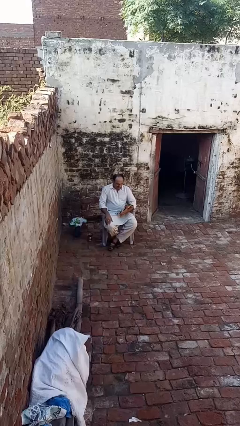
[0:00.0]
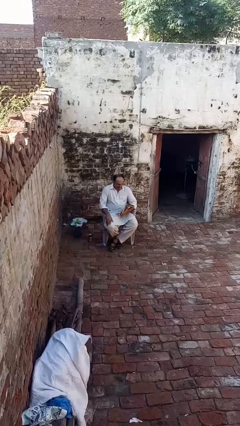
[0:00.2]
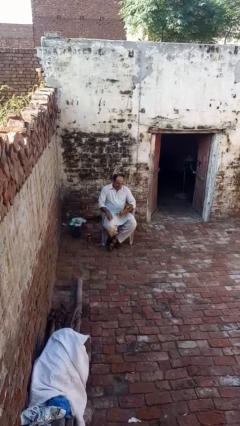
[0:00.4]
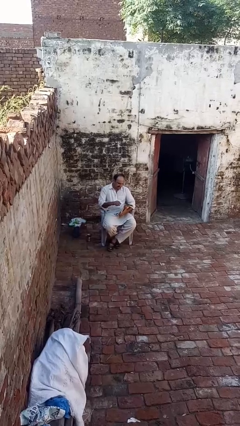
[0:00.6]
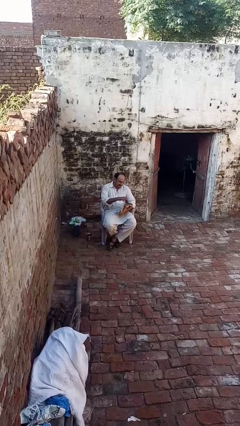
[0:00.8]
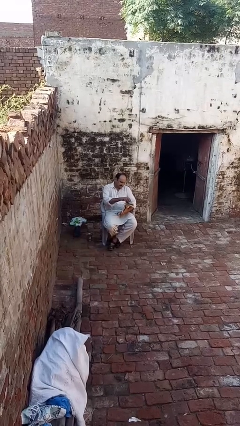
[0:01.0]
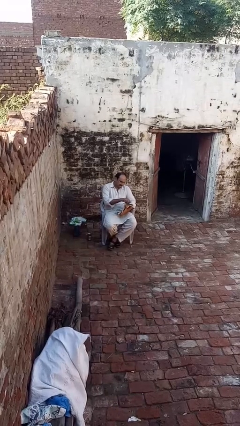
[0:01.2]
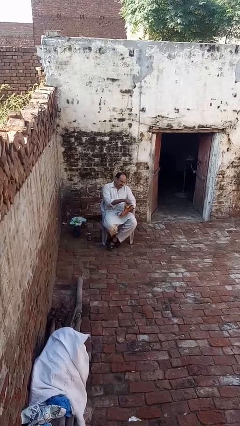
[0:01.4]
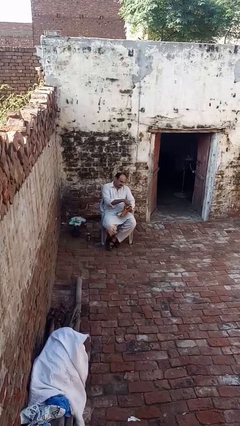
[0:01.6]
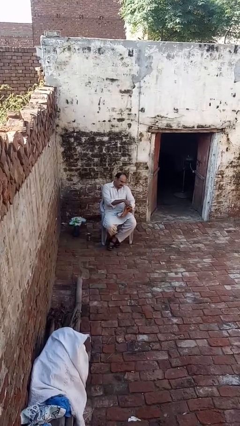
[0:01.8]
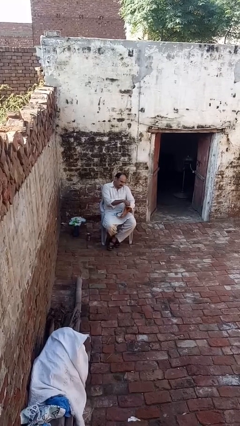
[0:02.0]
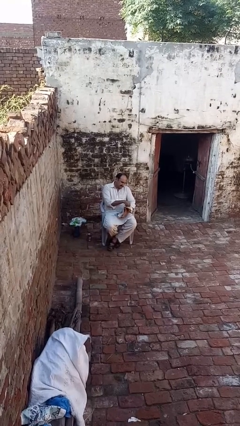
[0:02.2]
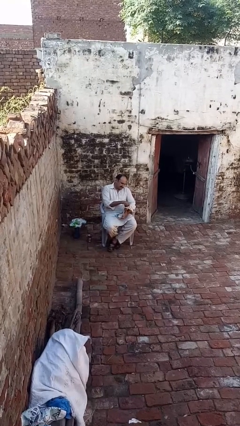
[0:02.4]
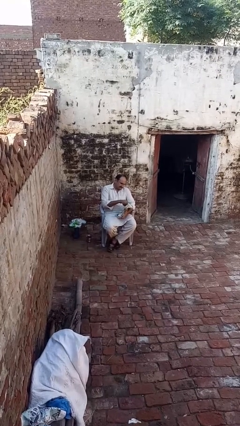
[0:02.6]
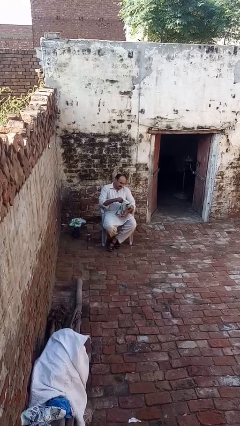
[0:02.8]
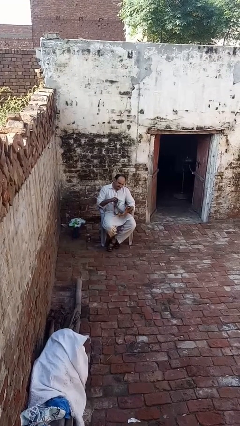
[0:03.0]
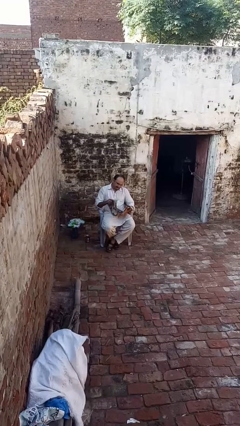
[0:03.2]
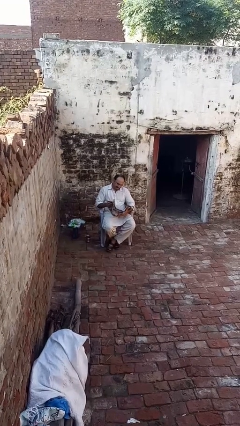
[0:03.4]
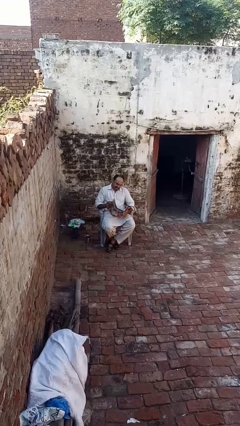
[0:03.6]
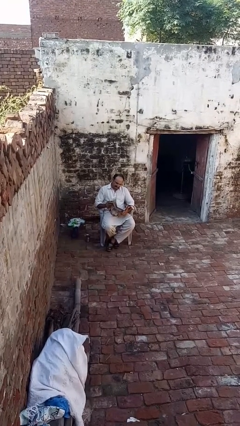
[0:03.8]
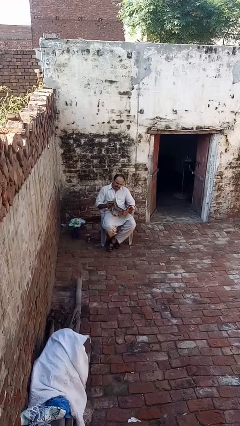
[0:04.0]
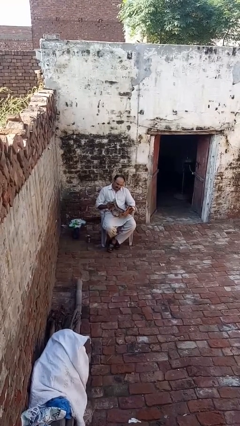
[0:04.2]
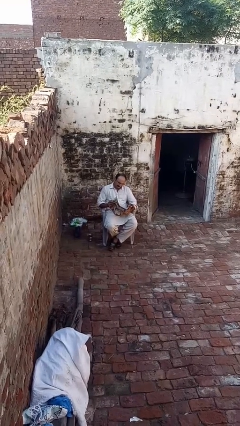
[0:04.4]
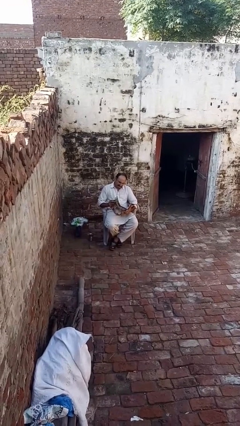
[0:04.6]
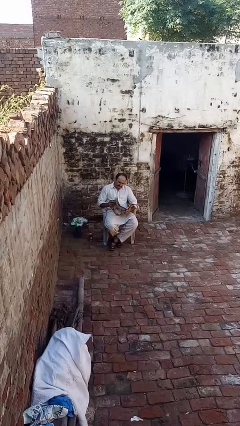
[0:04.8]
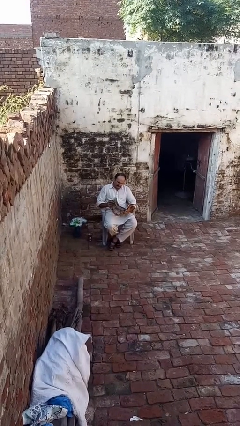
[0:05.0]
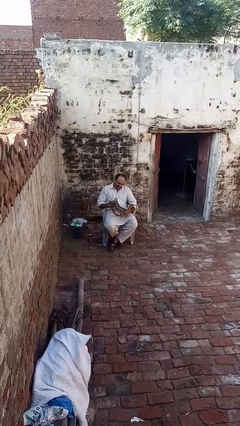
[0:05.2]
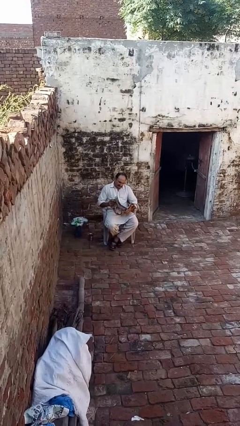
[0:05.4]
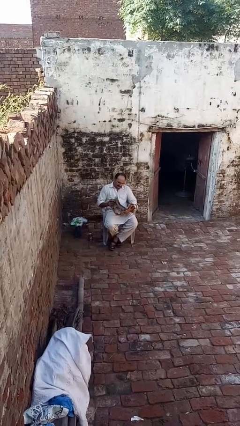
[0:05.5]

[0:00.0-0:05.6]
person reads magazine

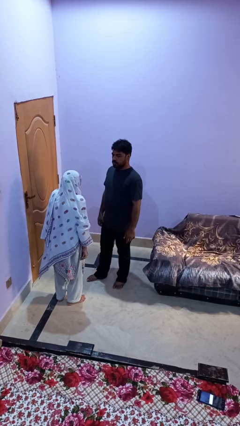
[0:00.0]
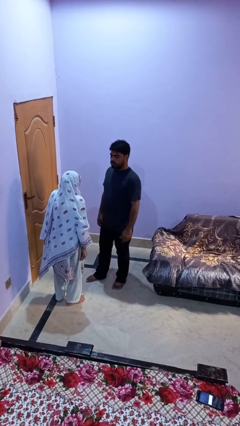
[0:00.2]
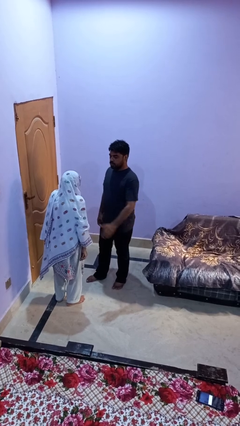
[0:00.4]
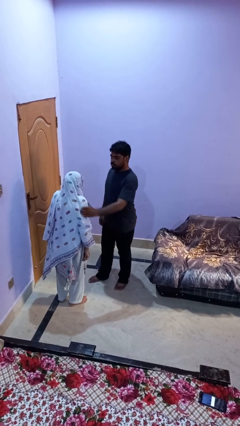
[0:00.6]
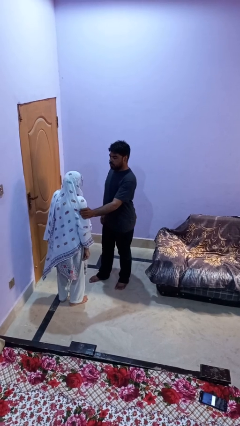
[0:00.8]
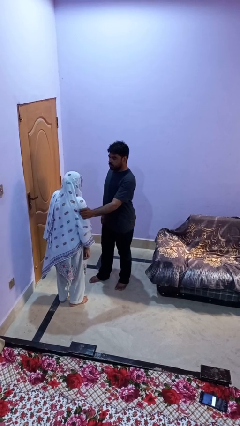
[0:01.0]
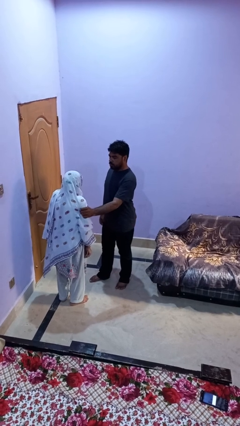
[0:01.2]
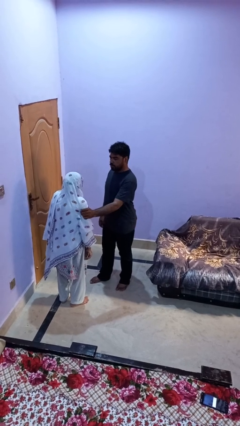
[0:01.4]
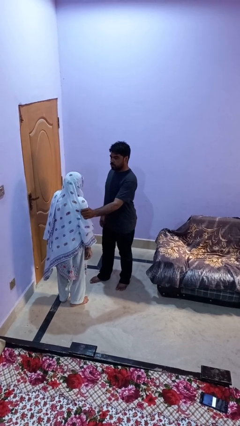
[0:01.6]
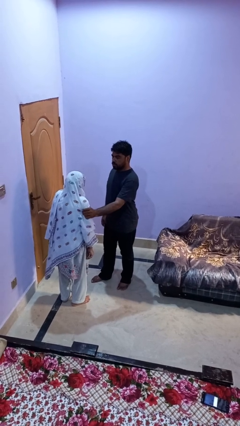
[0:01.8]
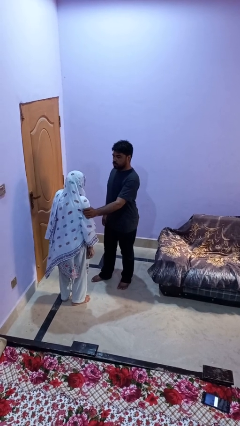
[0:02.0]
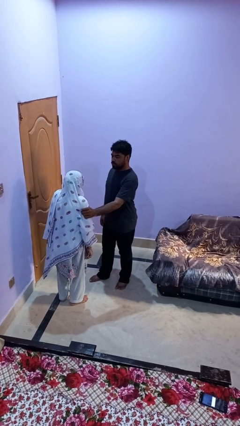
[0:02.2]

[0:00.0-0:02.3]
person grabs person by bicep

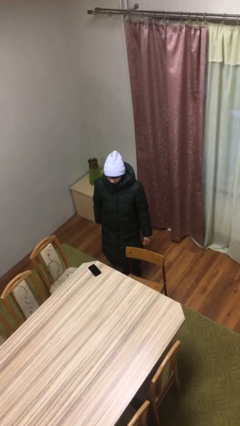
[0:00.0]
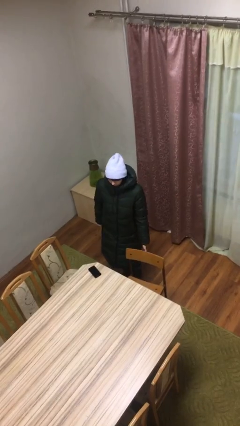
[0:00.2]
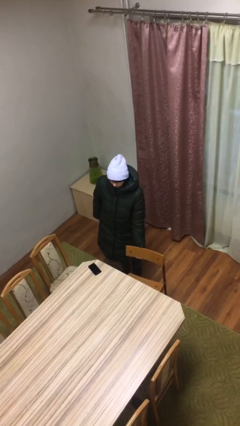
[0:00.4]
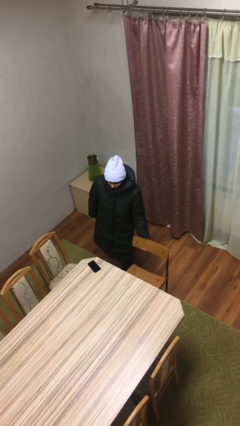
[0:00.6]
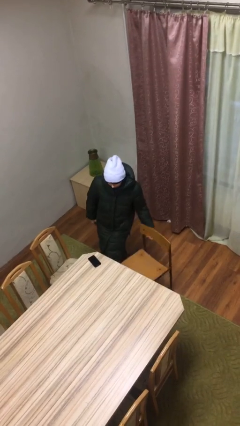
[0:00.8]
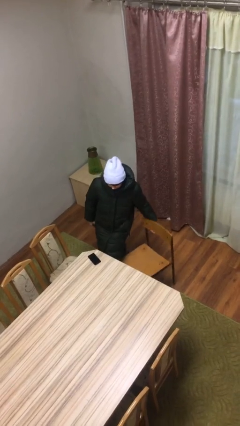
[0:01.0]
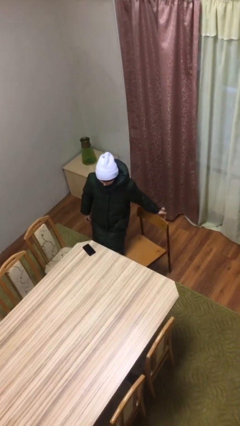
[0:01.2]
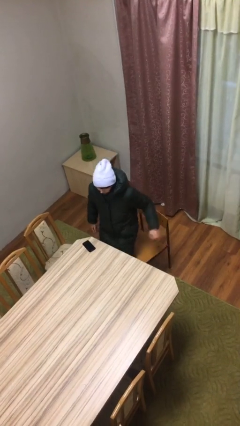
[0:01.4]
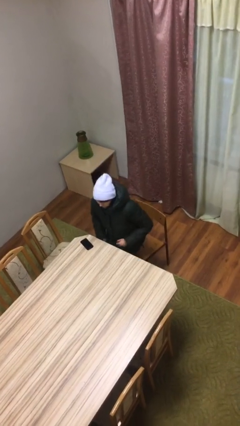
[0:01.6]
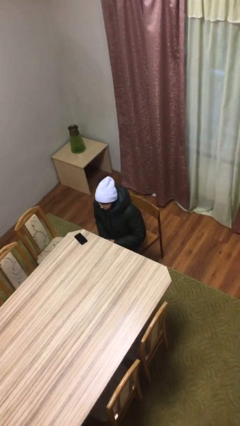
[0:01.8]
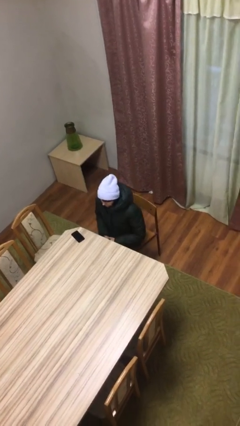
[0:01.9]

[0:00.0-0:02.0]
person sits down

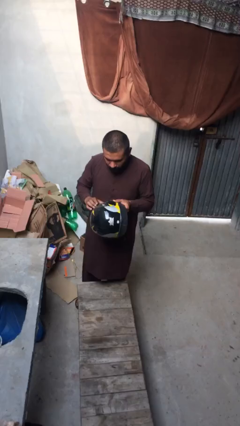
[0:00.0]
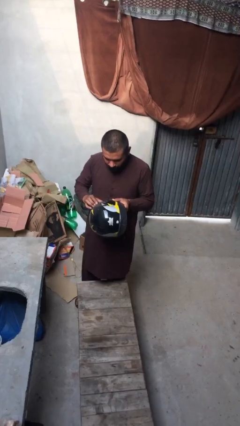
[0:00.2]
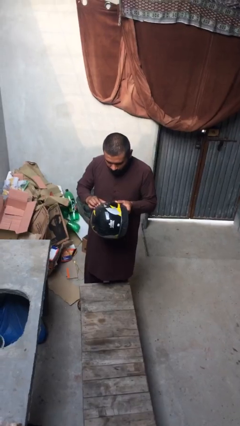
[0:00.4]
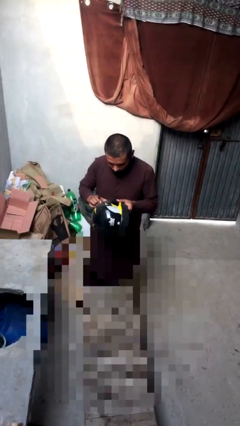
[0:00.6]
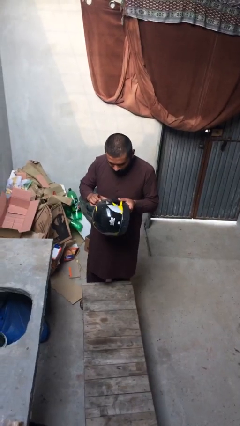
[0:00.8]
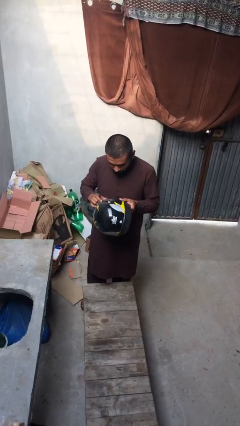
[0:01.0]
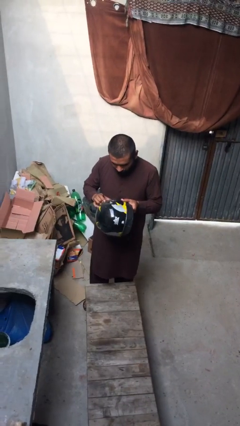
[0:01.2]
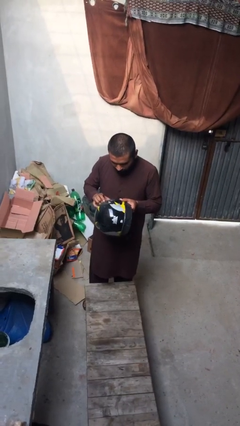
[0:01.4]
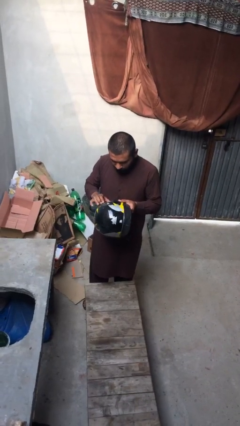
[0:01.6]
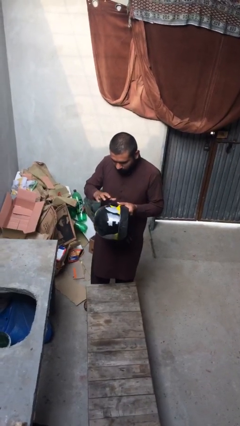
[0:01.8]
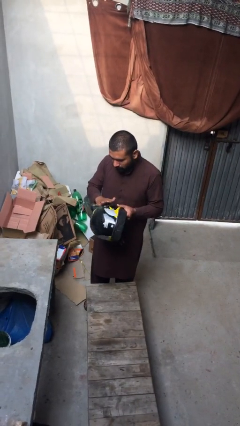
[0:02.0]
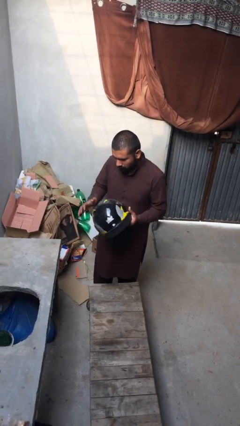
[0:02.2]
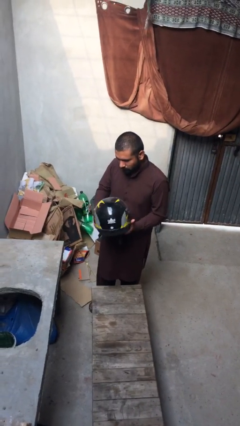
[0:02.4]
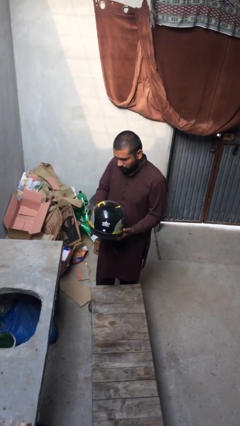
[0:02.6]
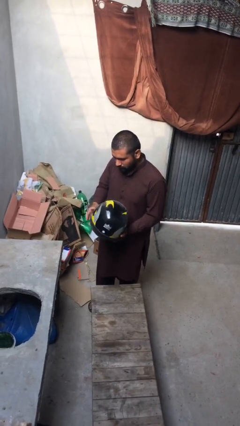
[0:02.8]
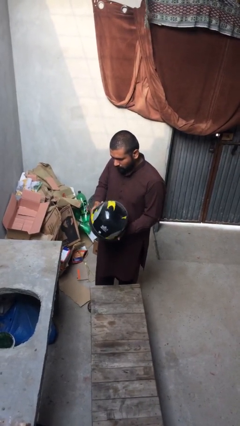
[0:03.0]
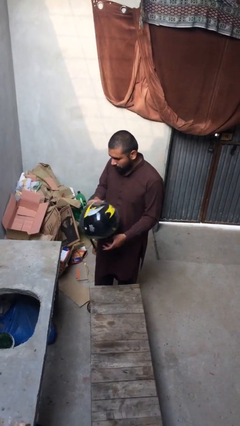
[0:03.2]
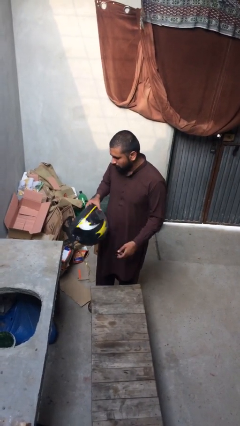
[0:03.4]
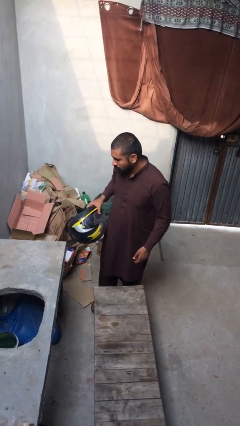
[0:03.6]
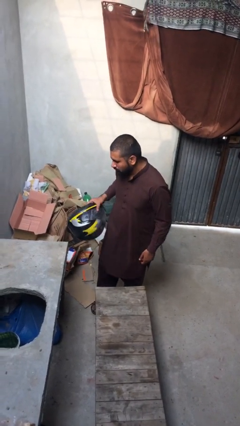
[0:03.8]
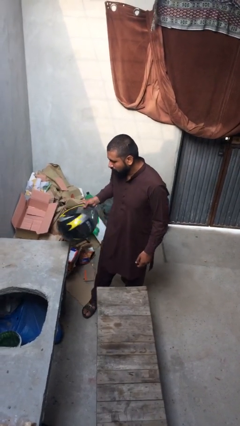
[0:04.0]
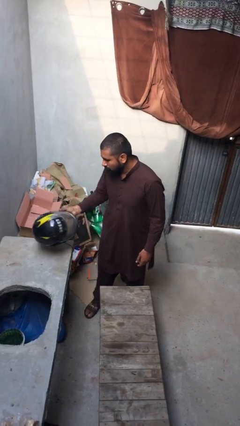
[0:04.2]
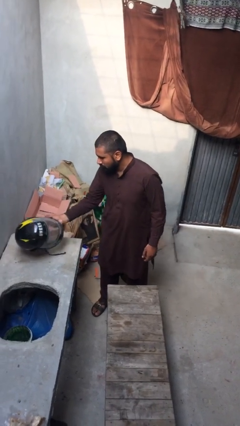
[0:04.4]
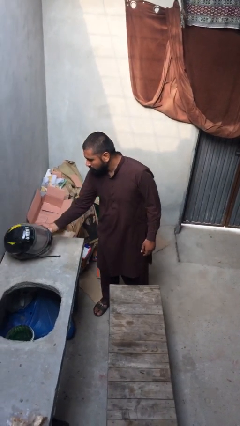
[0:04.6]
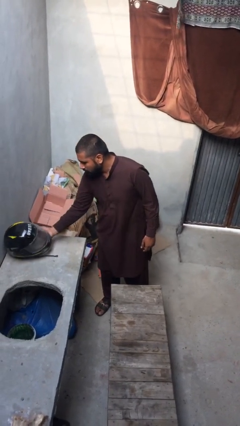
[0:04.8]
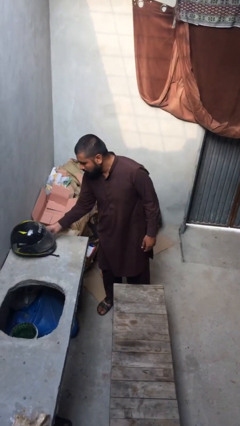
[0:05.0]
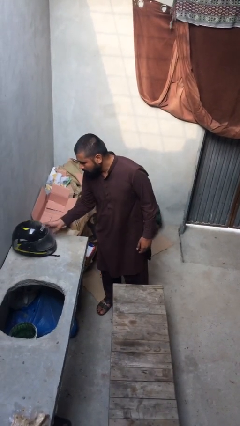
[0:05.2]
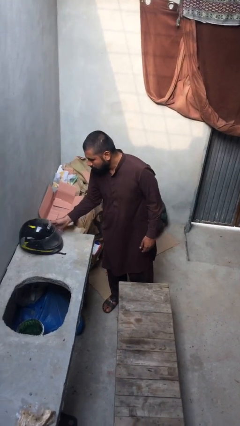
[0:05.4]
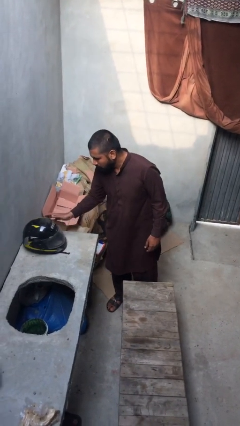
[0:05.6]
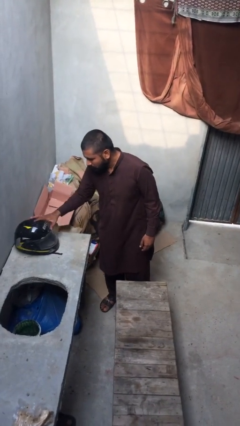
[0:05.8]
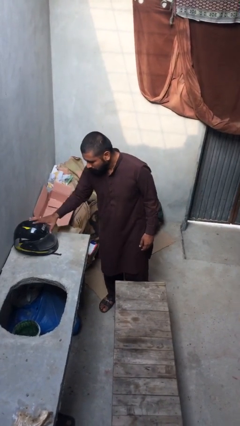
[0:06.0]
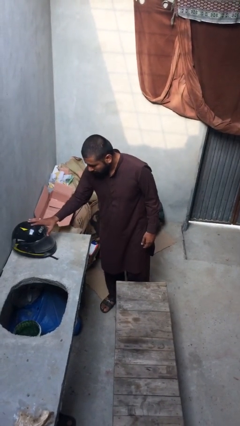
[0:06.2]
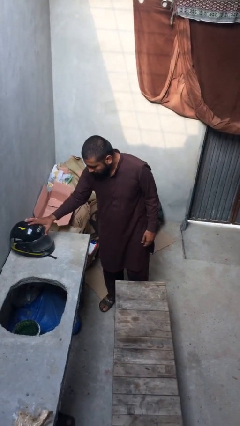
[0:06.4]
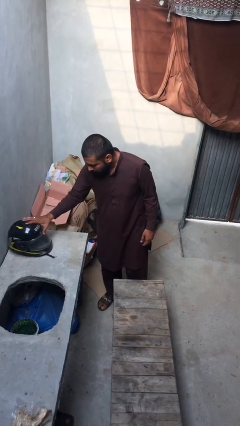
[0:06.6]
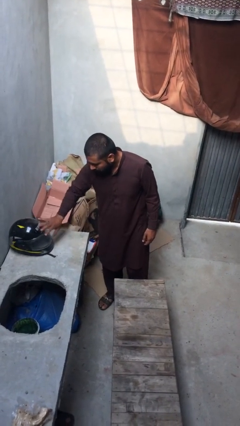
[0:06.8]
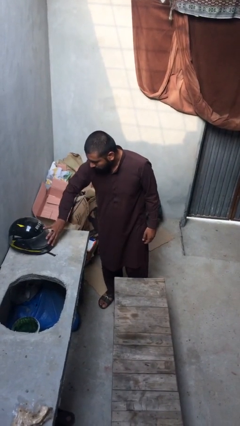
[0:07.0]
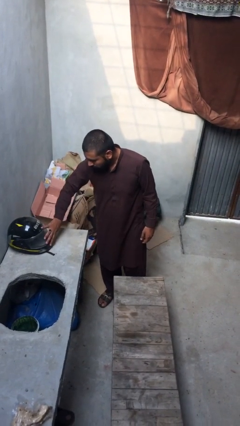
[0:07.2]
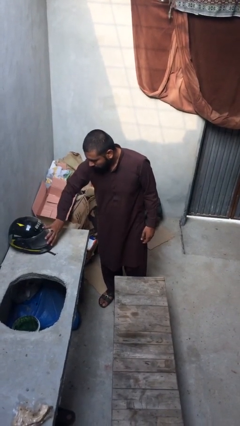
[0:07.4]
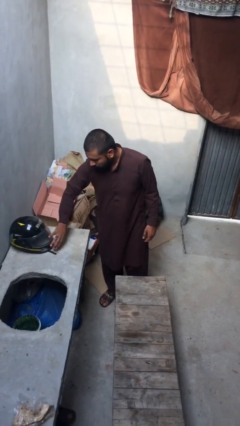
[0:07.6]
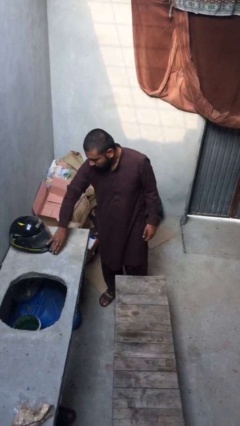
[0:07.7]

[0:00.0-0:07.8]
person puts down object on shelf
